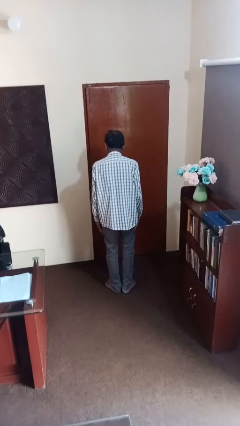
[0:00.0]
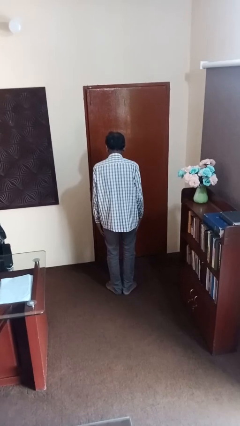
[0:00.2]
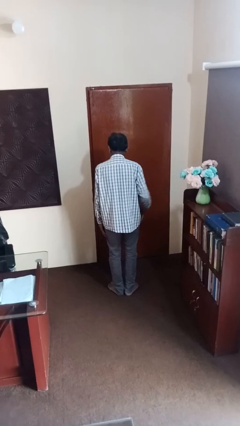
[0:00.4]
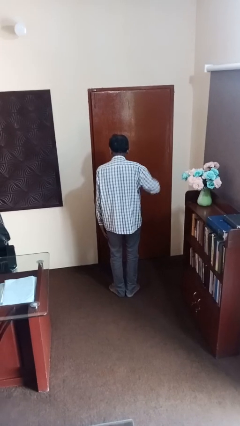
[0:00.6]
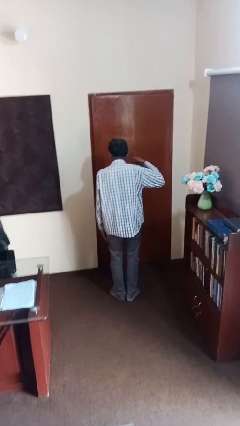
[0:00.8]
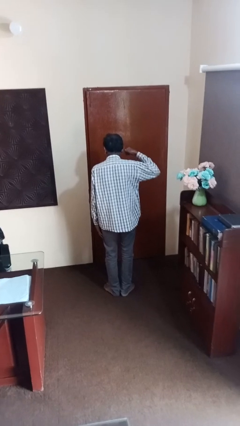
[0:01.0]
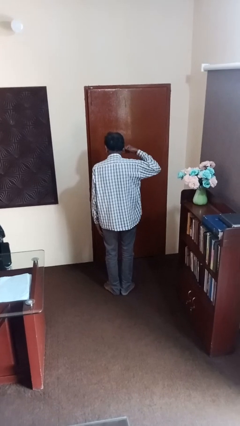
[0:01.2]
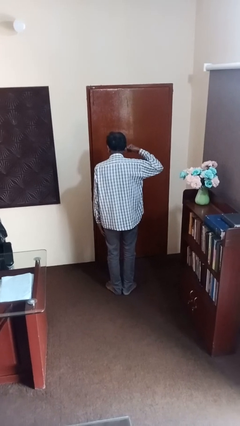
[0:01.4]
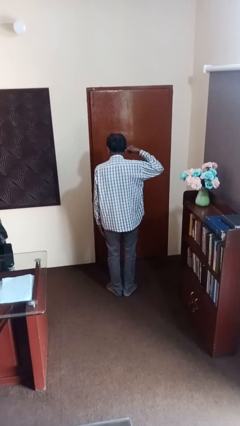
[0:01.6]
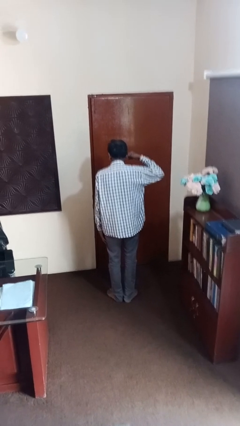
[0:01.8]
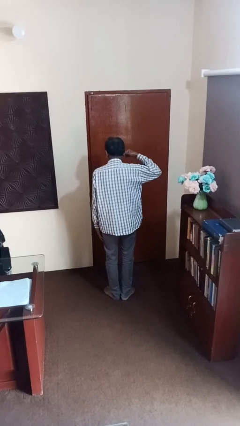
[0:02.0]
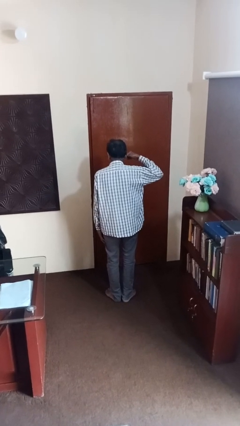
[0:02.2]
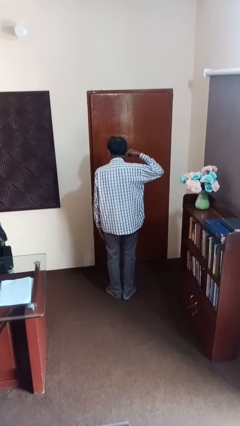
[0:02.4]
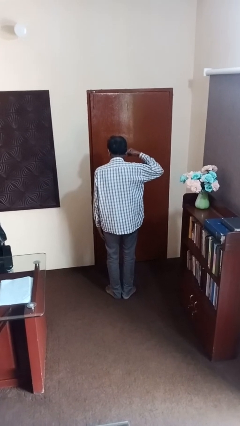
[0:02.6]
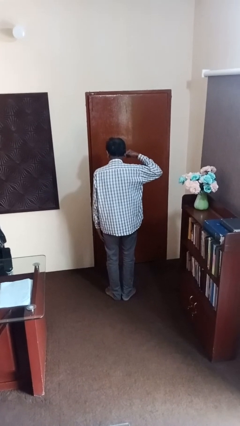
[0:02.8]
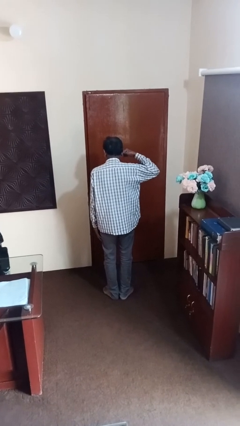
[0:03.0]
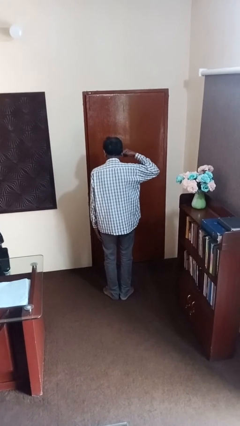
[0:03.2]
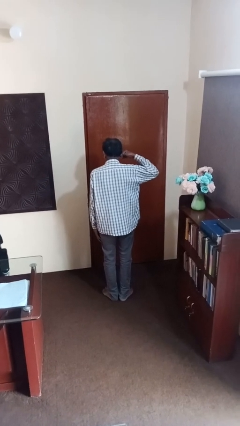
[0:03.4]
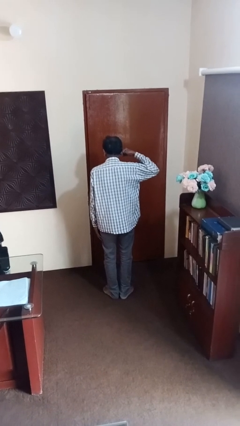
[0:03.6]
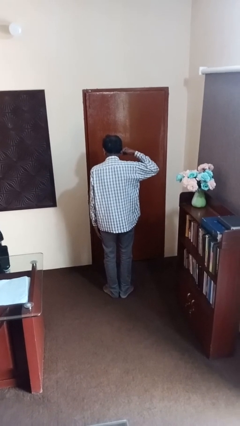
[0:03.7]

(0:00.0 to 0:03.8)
person gestures call me

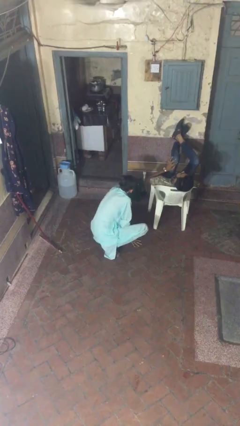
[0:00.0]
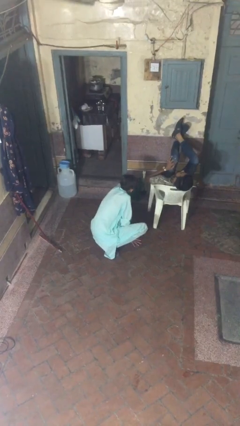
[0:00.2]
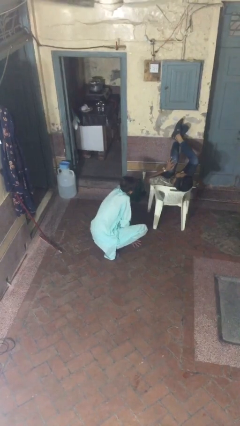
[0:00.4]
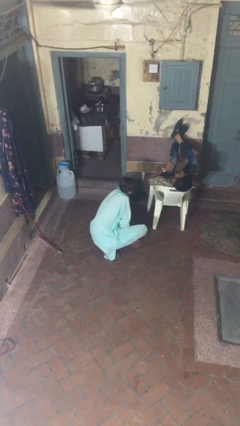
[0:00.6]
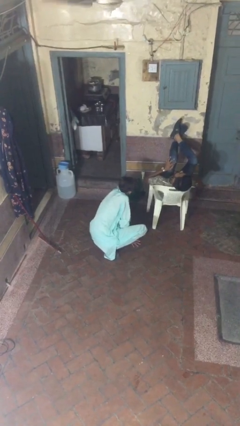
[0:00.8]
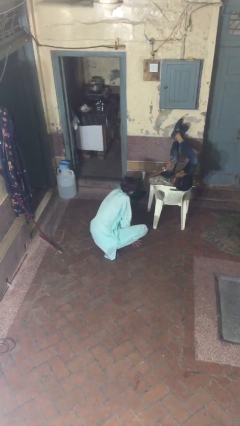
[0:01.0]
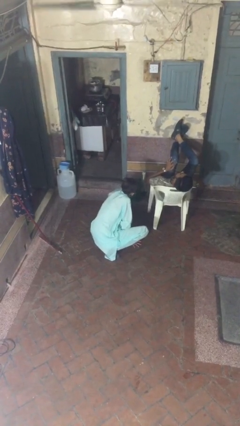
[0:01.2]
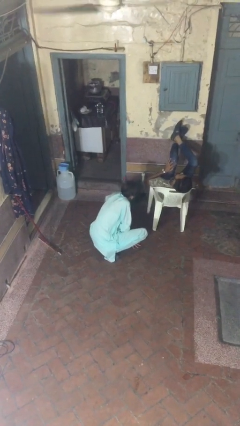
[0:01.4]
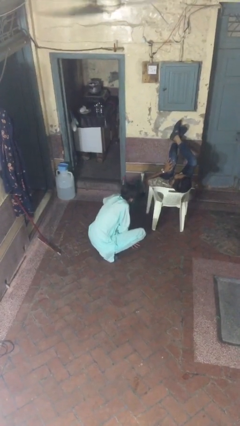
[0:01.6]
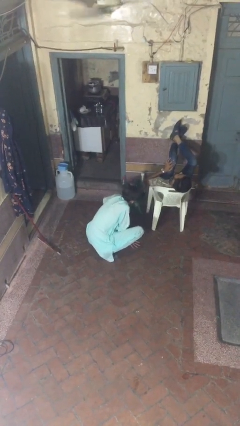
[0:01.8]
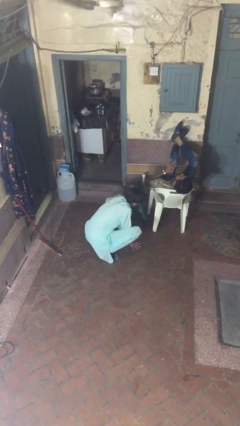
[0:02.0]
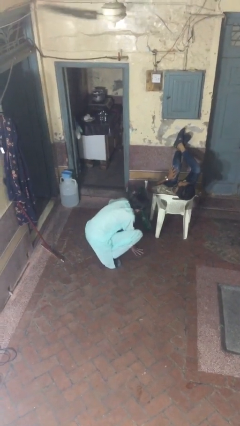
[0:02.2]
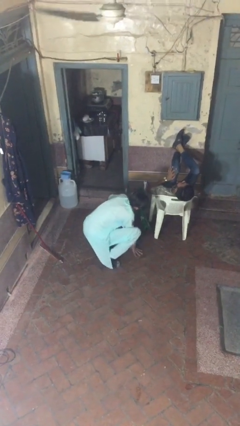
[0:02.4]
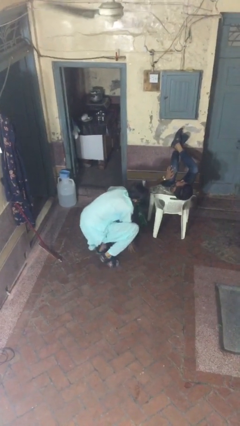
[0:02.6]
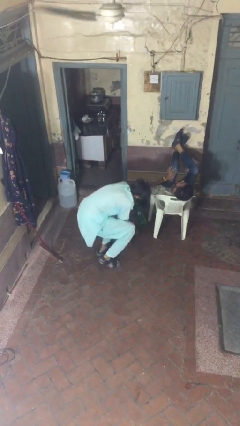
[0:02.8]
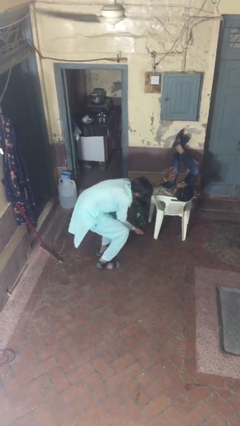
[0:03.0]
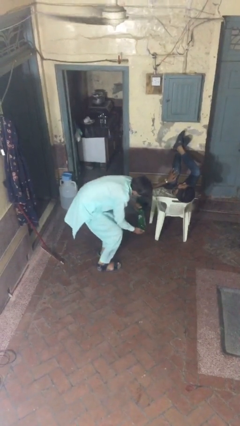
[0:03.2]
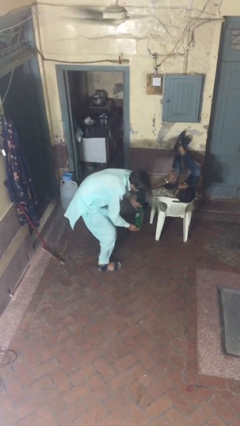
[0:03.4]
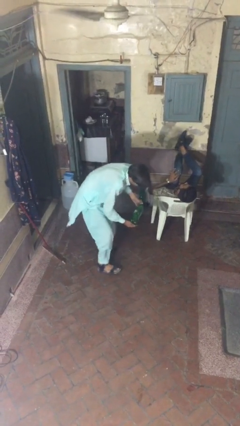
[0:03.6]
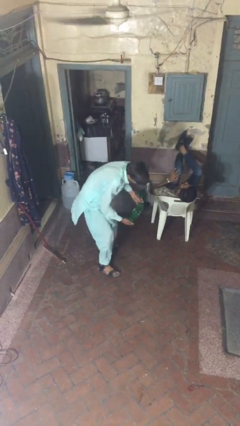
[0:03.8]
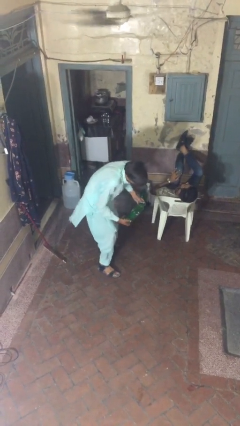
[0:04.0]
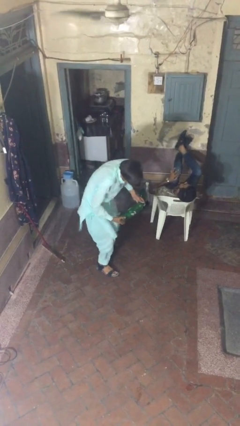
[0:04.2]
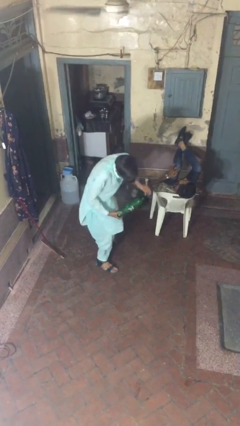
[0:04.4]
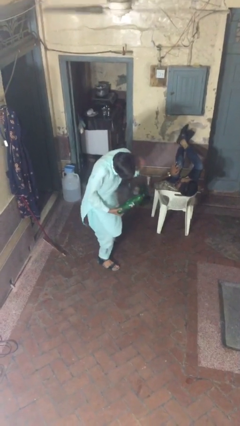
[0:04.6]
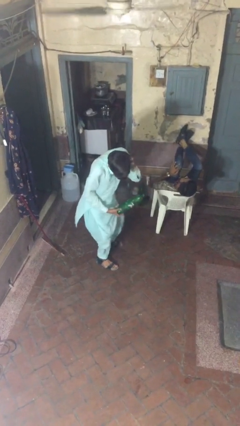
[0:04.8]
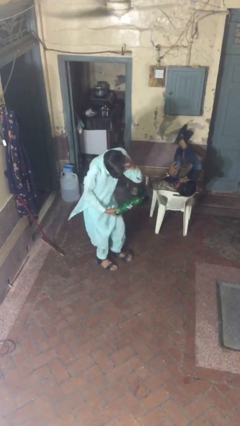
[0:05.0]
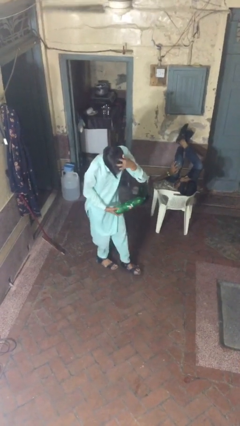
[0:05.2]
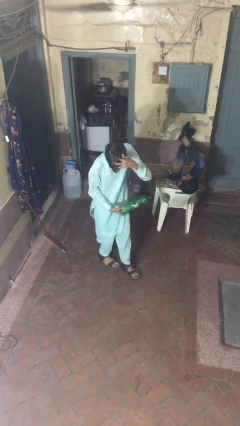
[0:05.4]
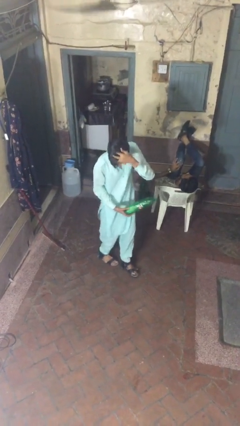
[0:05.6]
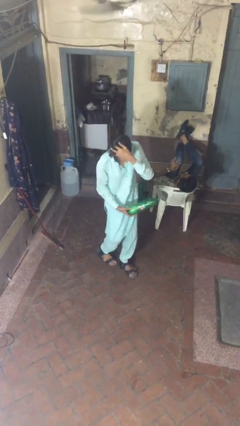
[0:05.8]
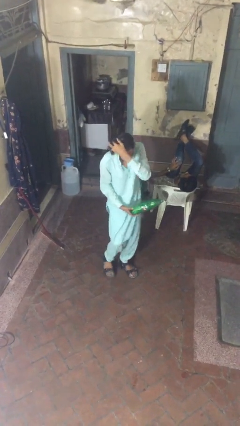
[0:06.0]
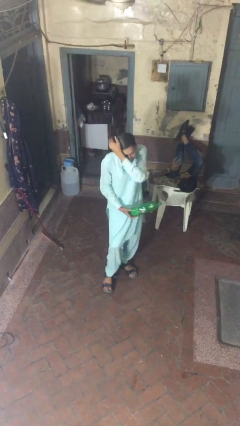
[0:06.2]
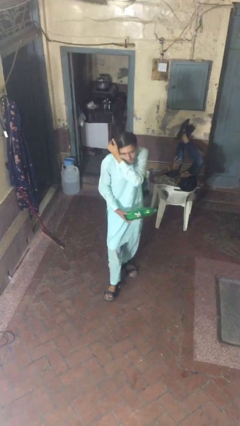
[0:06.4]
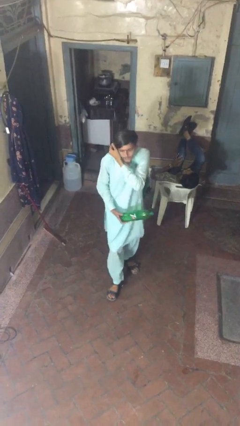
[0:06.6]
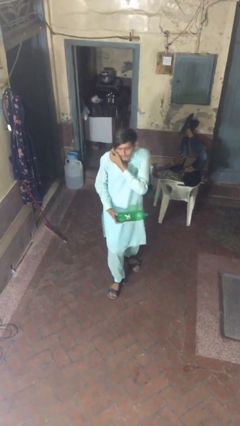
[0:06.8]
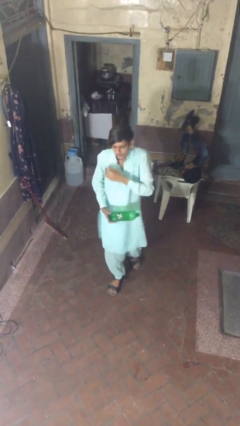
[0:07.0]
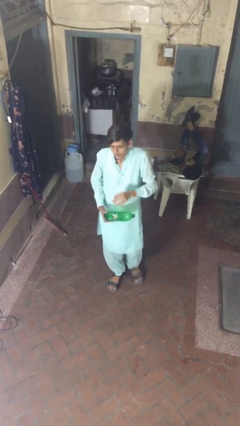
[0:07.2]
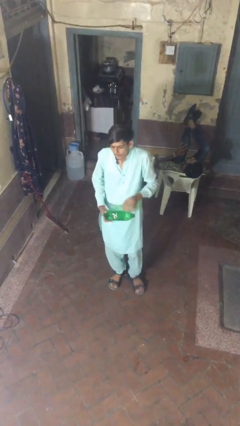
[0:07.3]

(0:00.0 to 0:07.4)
person steals object from person

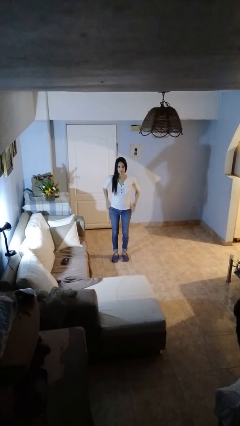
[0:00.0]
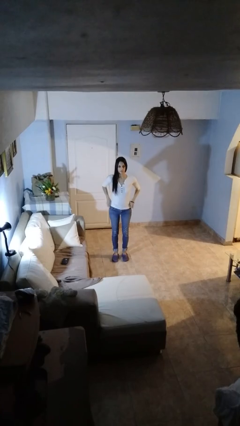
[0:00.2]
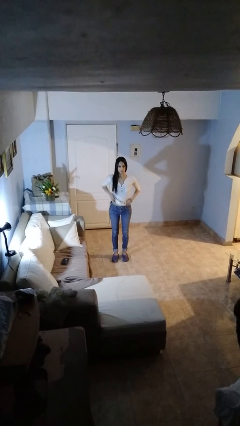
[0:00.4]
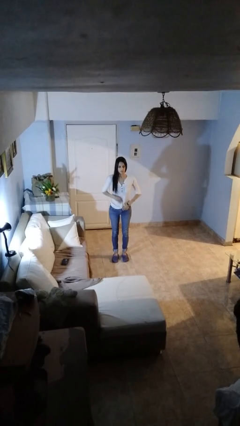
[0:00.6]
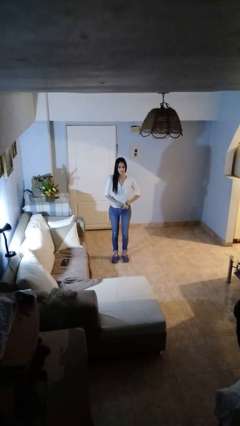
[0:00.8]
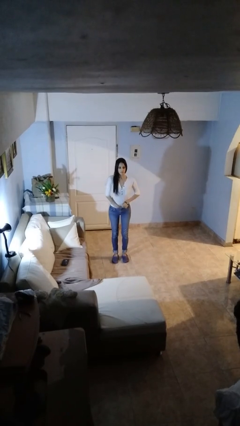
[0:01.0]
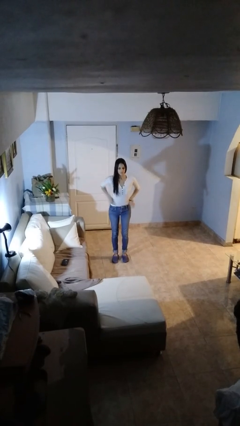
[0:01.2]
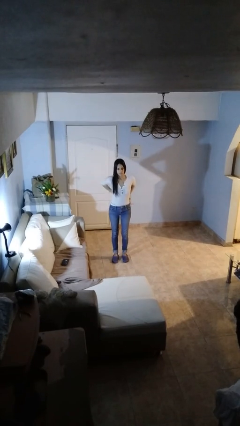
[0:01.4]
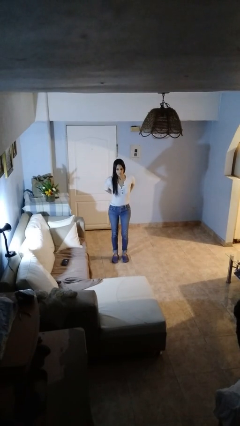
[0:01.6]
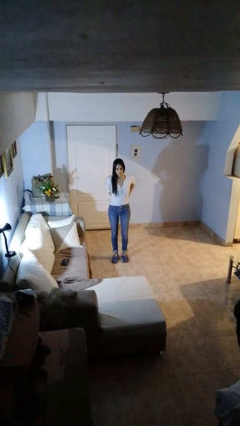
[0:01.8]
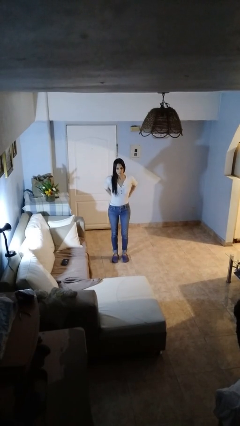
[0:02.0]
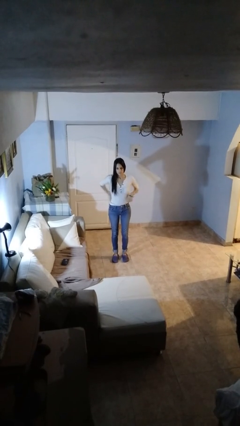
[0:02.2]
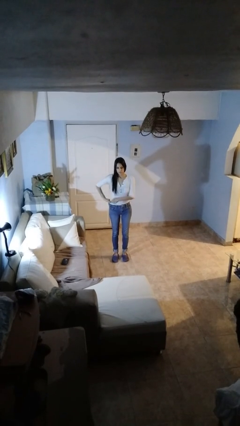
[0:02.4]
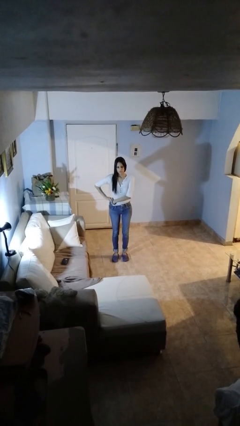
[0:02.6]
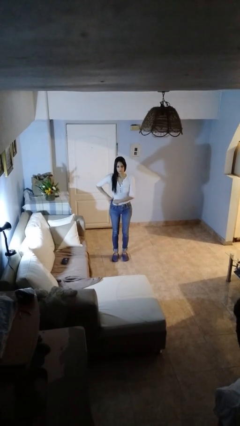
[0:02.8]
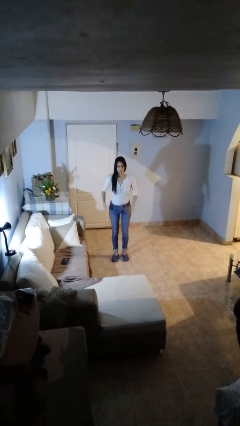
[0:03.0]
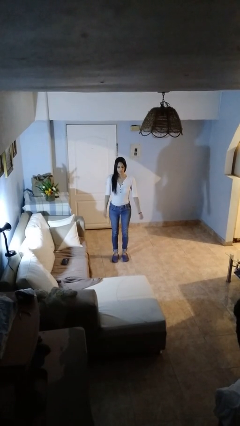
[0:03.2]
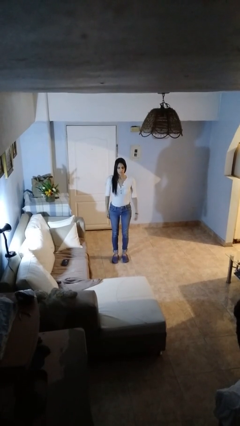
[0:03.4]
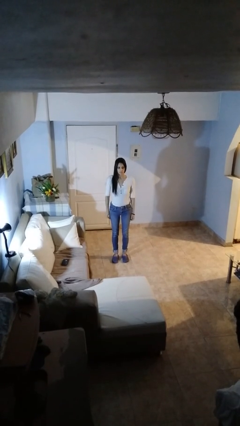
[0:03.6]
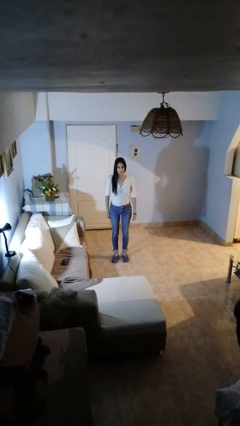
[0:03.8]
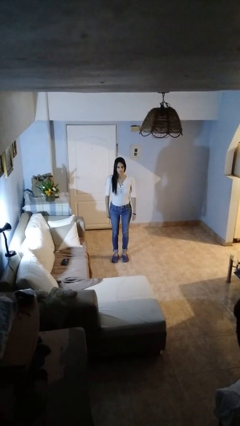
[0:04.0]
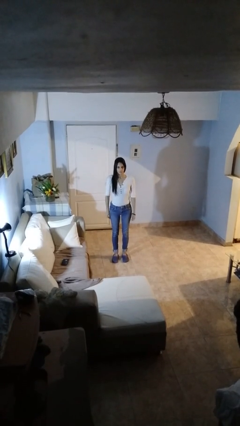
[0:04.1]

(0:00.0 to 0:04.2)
person tucks in shirt

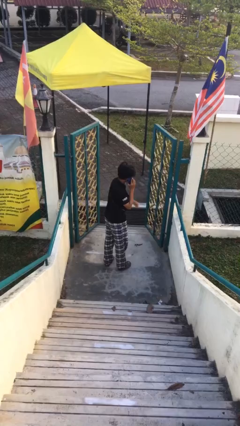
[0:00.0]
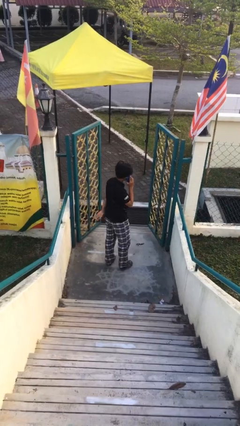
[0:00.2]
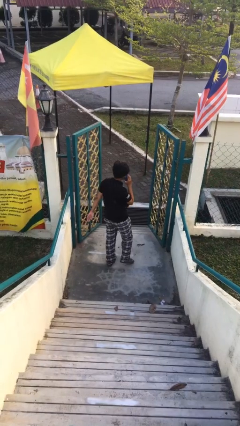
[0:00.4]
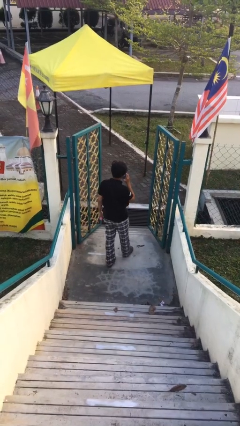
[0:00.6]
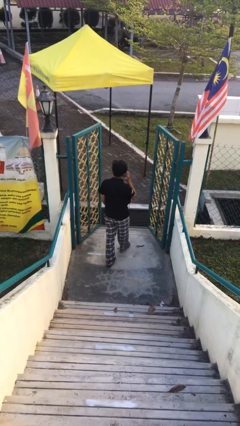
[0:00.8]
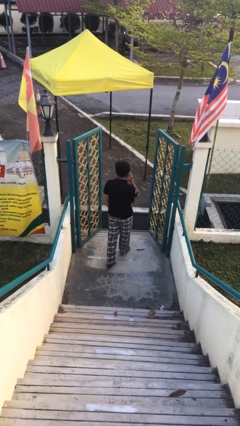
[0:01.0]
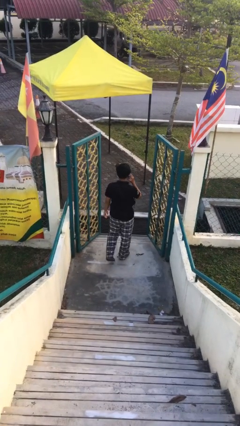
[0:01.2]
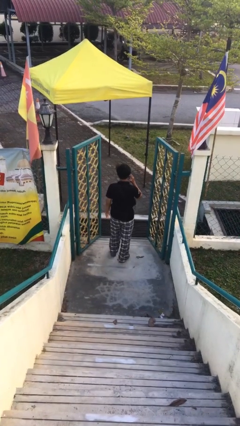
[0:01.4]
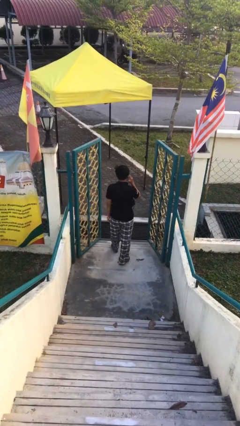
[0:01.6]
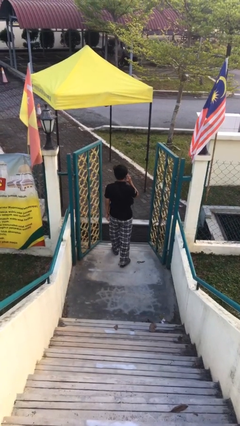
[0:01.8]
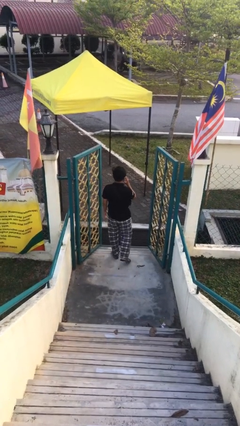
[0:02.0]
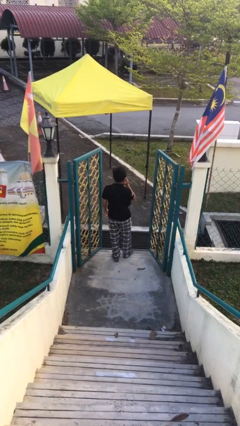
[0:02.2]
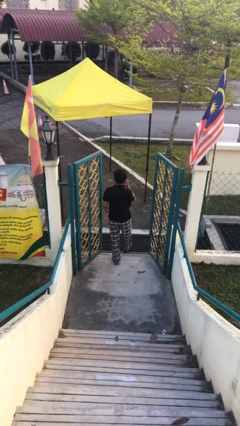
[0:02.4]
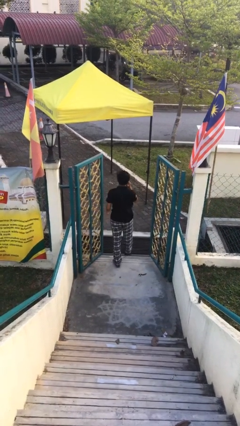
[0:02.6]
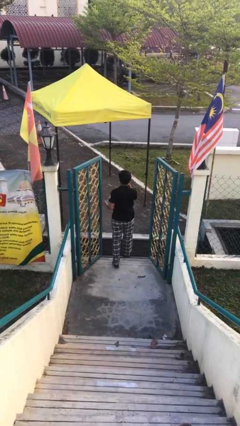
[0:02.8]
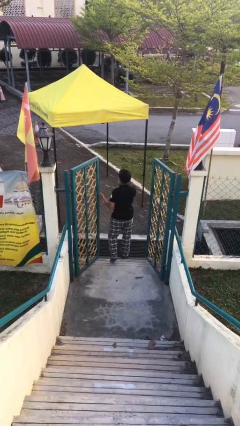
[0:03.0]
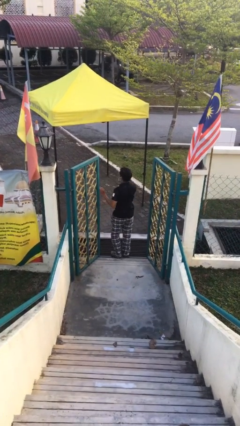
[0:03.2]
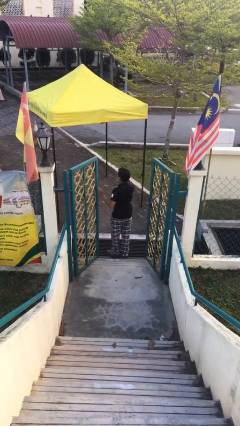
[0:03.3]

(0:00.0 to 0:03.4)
person exits scene through structure
